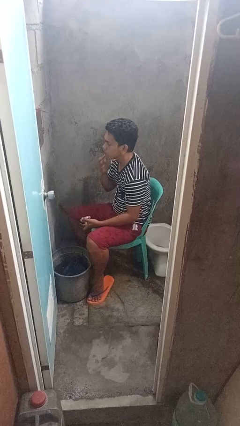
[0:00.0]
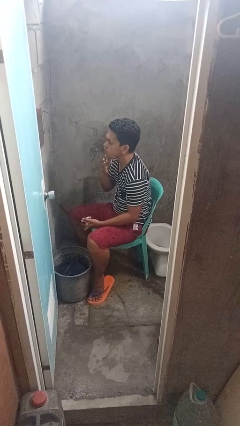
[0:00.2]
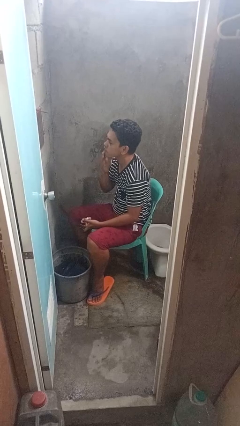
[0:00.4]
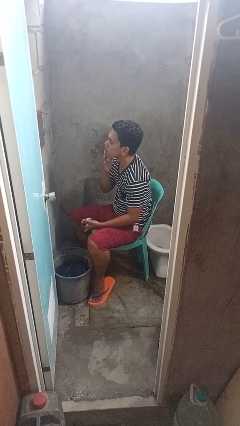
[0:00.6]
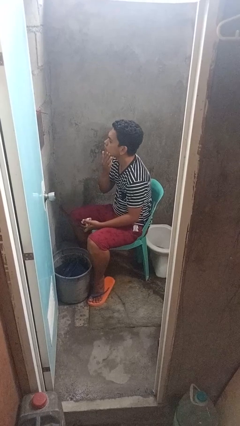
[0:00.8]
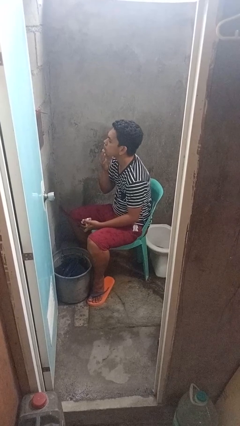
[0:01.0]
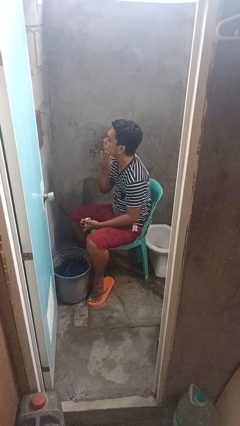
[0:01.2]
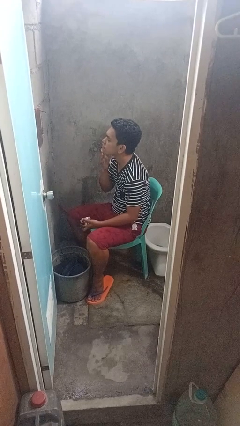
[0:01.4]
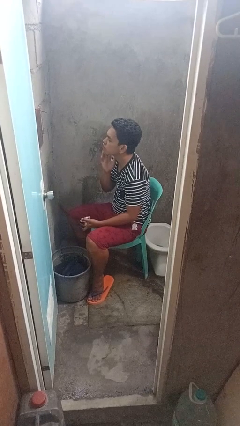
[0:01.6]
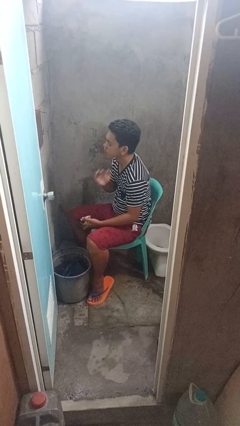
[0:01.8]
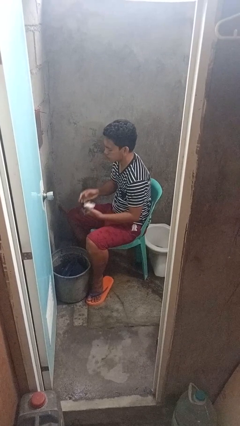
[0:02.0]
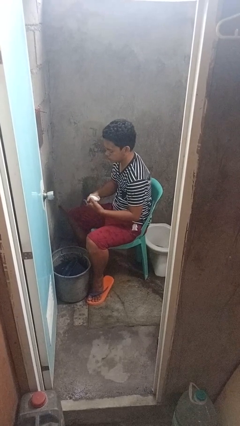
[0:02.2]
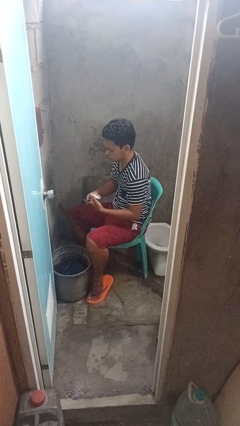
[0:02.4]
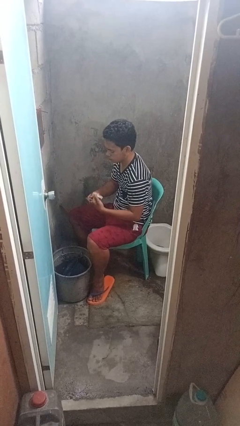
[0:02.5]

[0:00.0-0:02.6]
person applies shaving cream

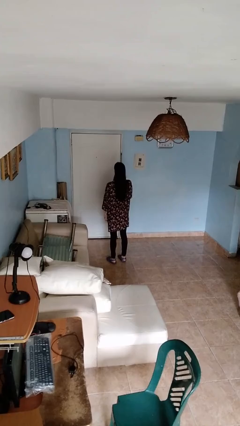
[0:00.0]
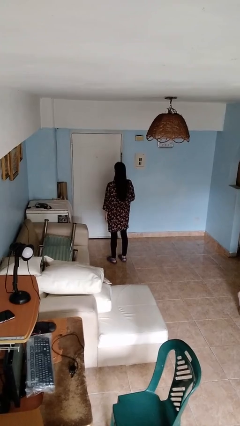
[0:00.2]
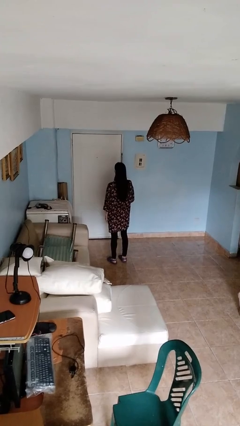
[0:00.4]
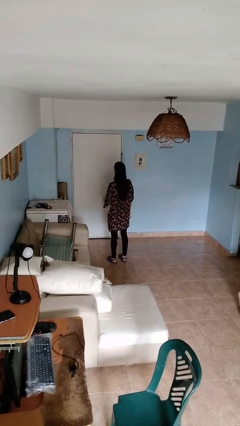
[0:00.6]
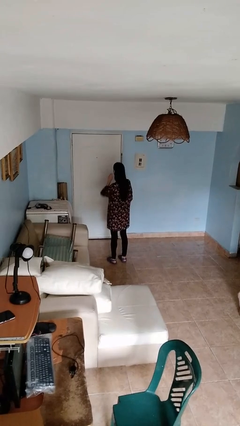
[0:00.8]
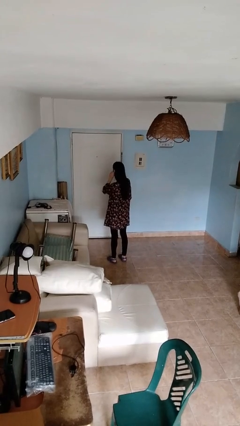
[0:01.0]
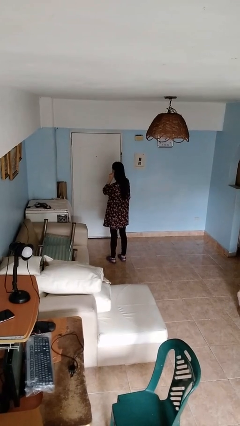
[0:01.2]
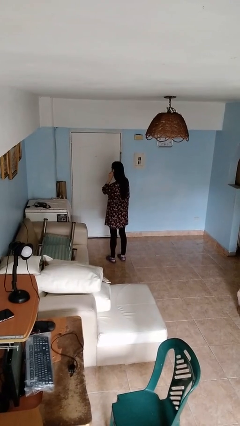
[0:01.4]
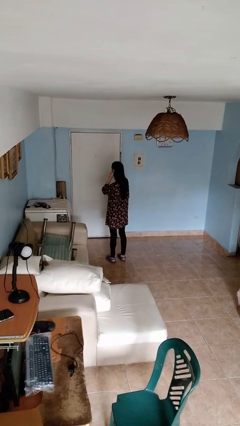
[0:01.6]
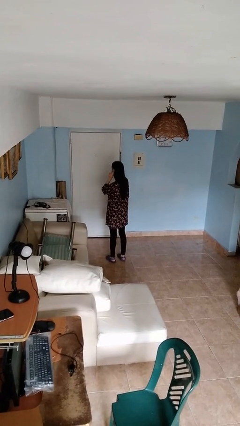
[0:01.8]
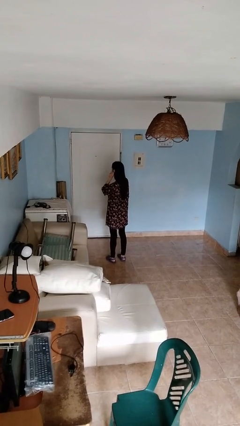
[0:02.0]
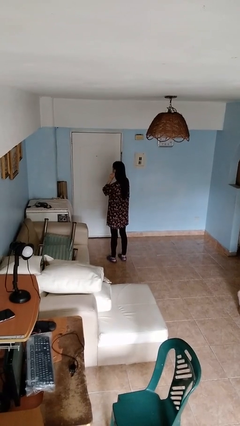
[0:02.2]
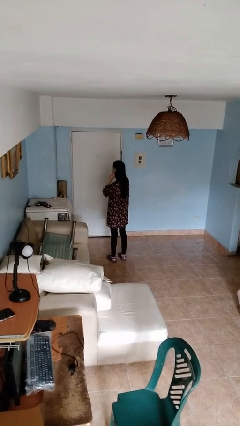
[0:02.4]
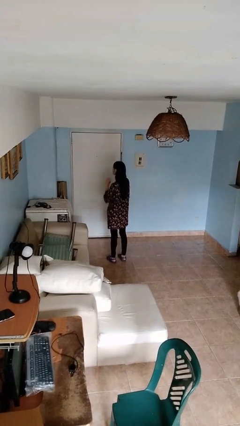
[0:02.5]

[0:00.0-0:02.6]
person touches earlobe

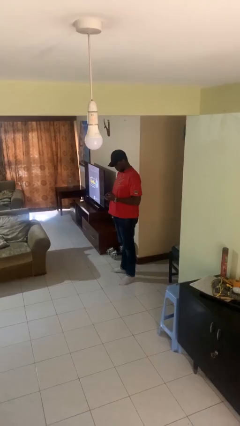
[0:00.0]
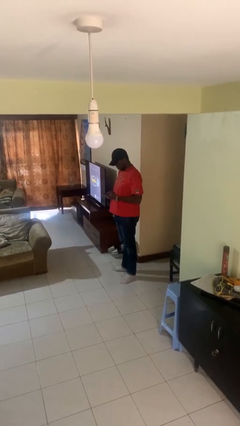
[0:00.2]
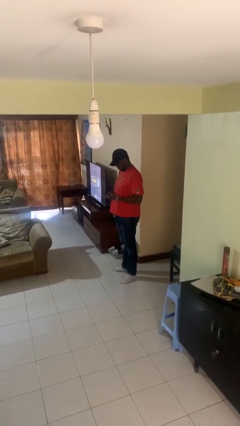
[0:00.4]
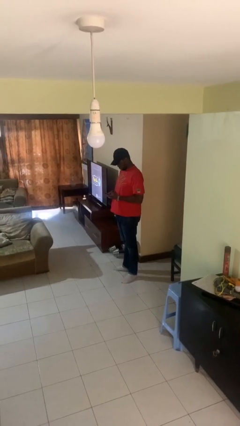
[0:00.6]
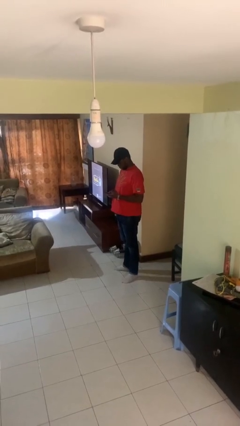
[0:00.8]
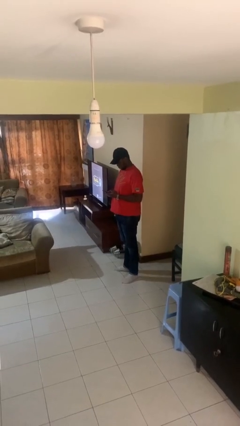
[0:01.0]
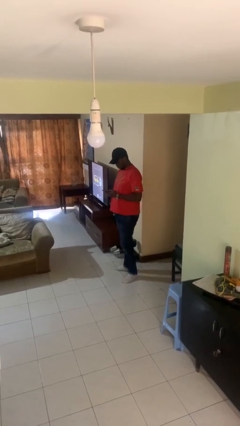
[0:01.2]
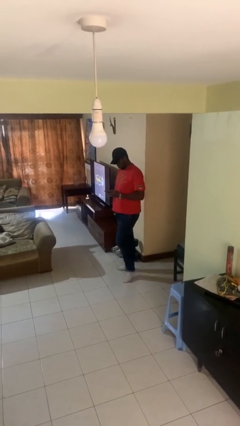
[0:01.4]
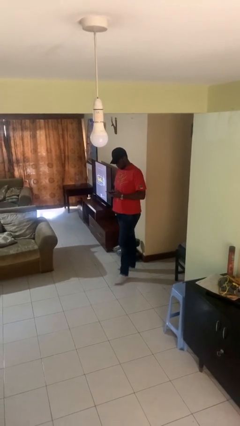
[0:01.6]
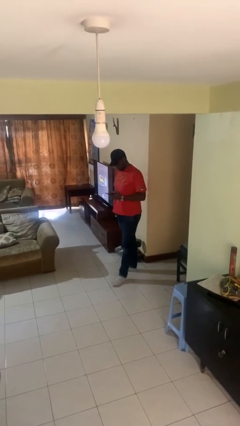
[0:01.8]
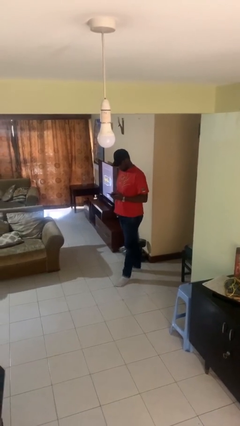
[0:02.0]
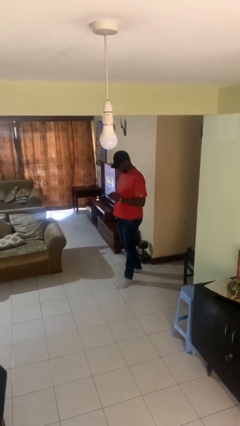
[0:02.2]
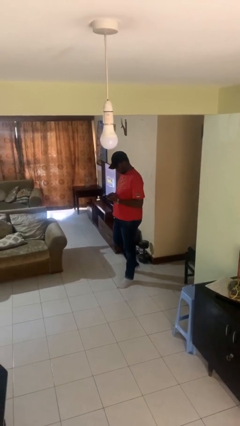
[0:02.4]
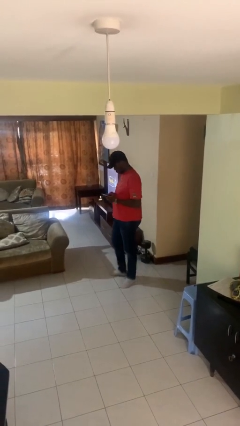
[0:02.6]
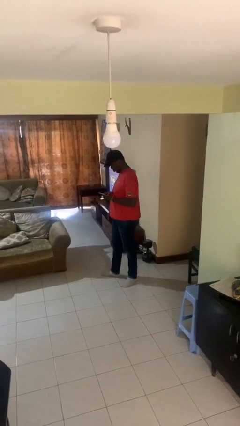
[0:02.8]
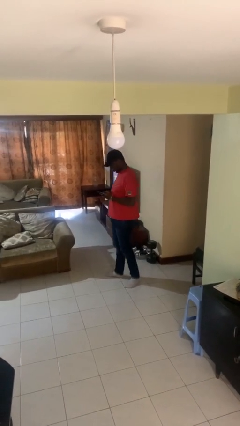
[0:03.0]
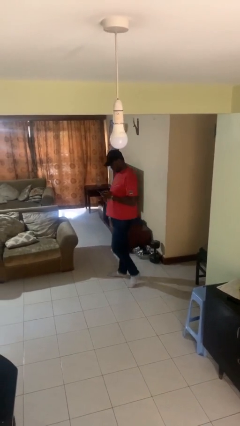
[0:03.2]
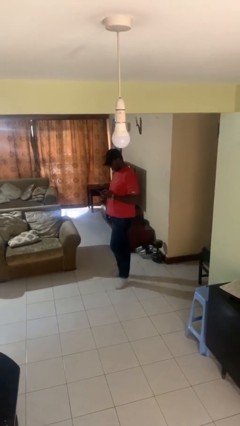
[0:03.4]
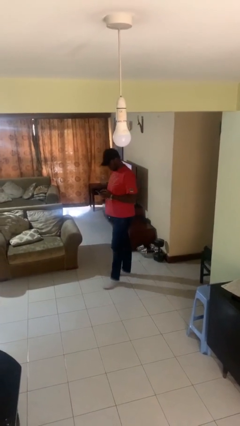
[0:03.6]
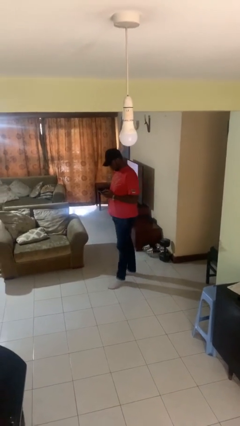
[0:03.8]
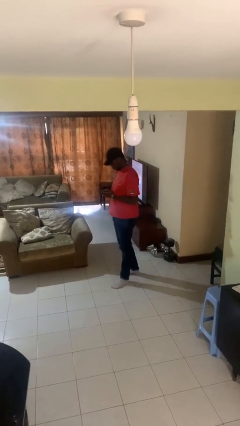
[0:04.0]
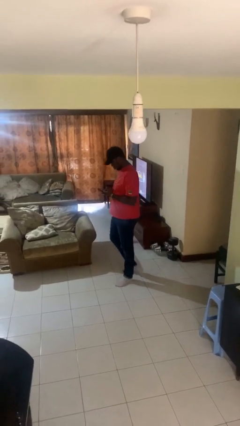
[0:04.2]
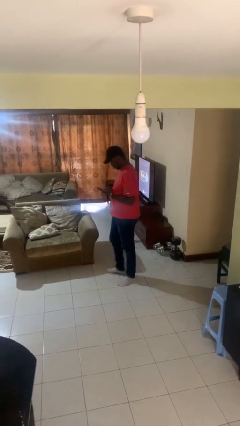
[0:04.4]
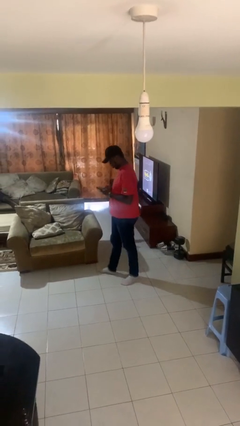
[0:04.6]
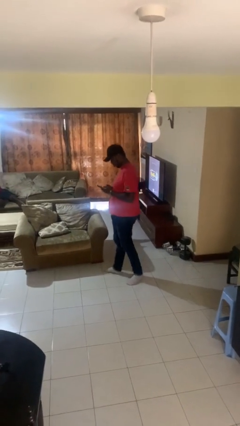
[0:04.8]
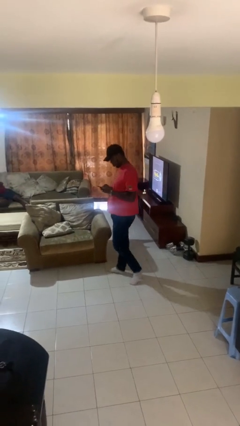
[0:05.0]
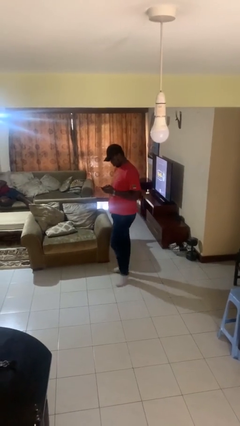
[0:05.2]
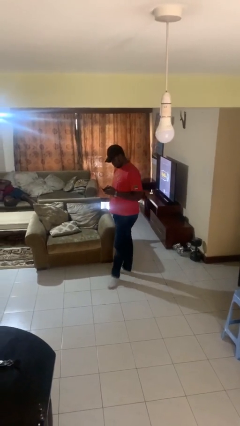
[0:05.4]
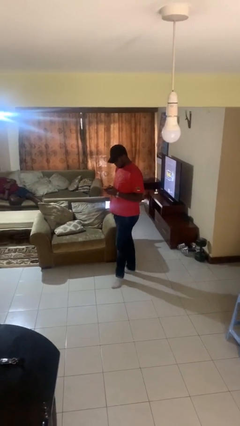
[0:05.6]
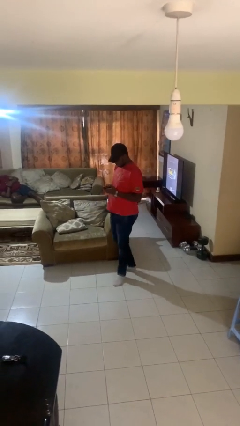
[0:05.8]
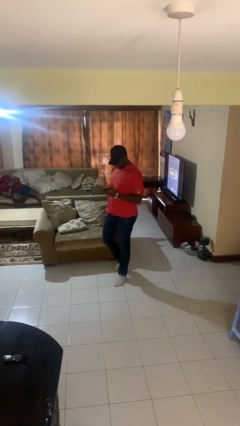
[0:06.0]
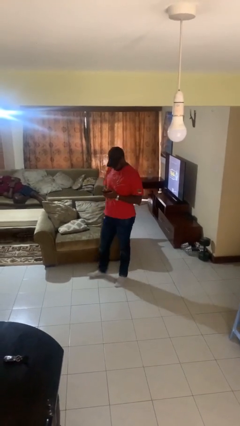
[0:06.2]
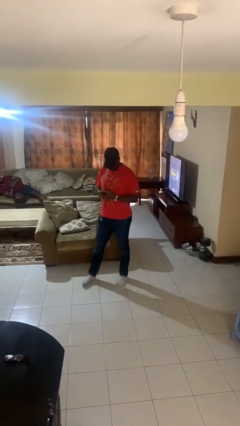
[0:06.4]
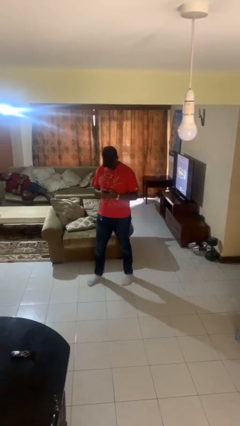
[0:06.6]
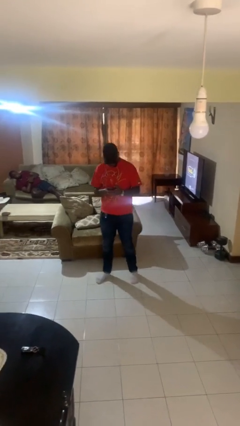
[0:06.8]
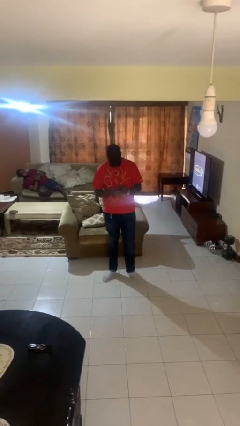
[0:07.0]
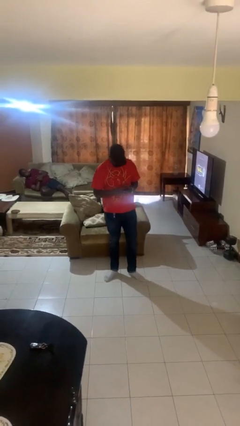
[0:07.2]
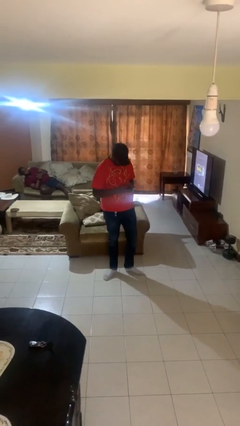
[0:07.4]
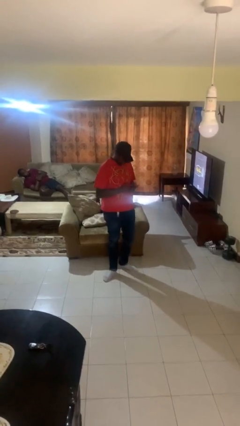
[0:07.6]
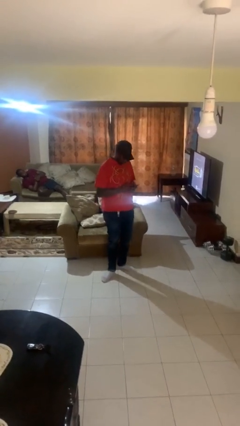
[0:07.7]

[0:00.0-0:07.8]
person texts on phone

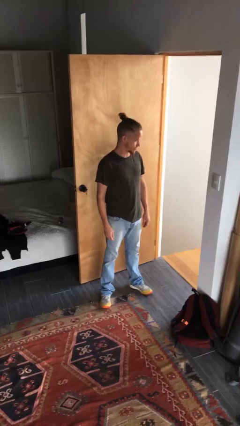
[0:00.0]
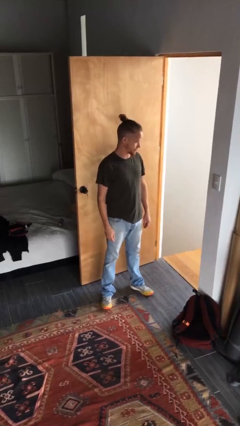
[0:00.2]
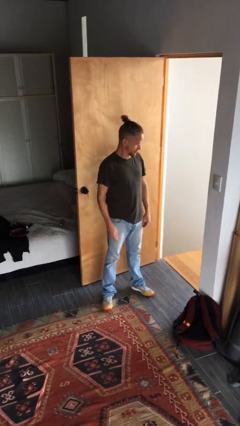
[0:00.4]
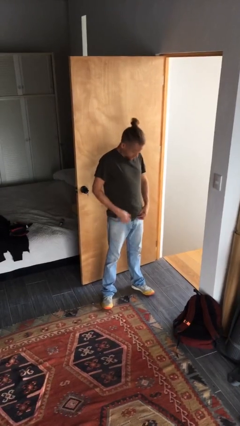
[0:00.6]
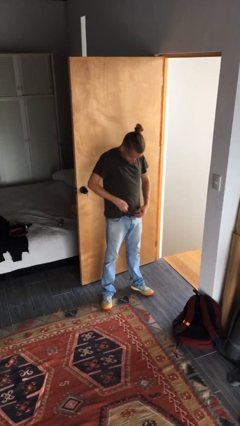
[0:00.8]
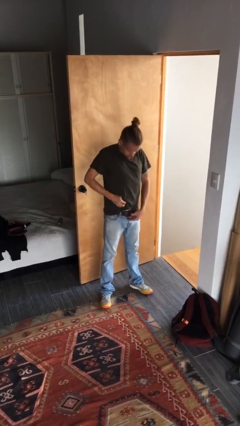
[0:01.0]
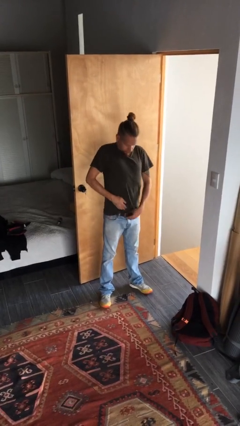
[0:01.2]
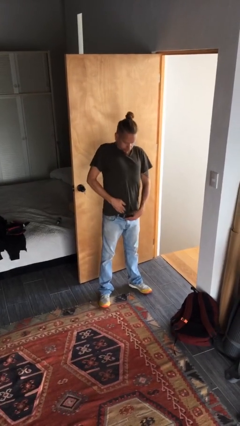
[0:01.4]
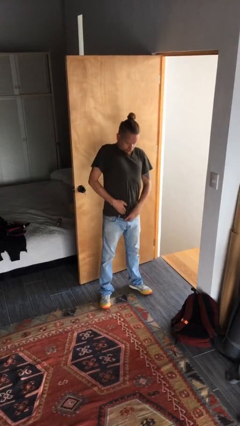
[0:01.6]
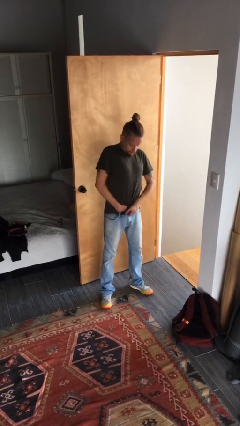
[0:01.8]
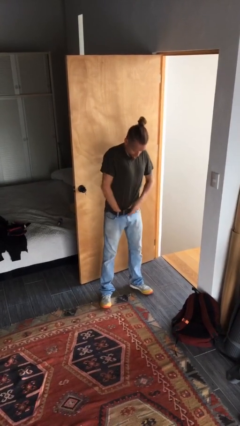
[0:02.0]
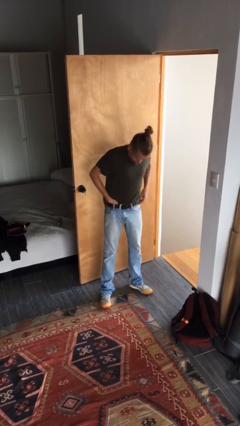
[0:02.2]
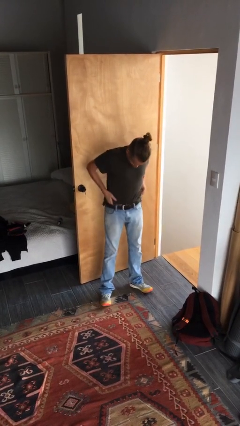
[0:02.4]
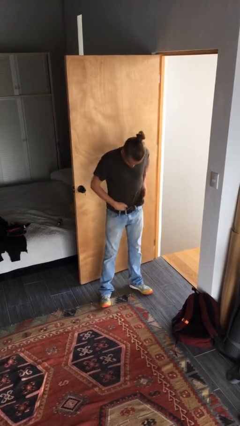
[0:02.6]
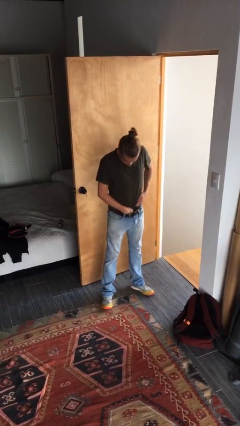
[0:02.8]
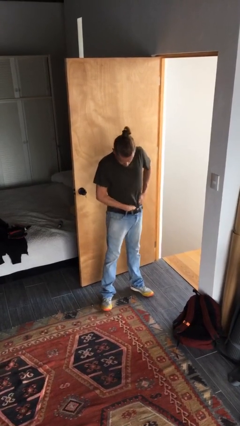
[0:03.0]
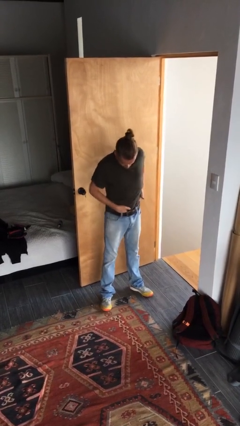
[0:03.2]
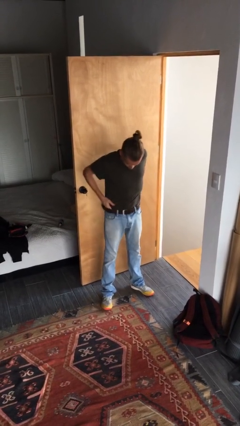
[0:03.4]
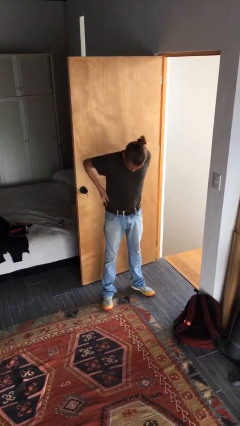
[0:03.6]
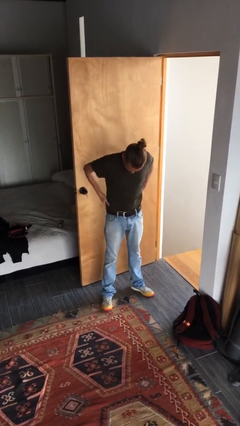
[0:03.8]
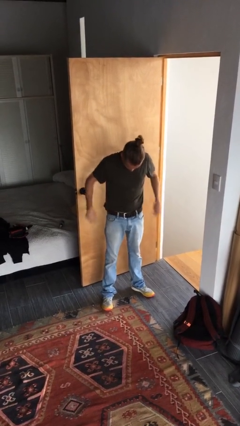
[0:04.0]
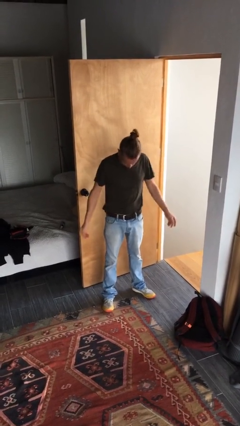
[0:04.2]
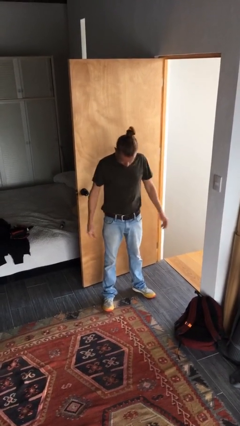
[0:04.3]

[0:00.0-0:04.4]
person tucks in shirt

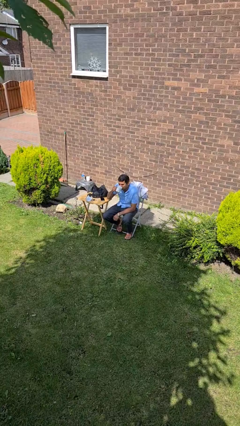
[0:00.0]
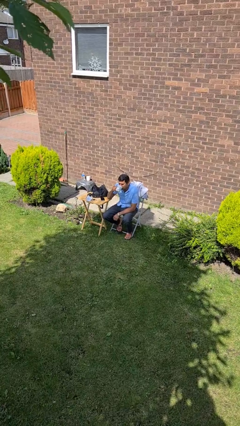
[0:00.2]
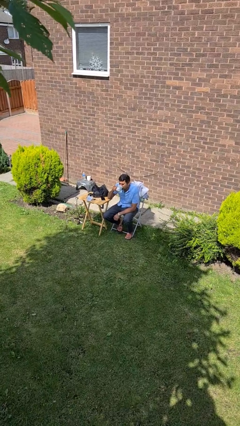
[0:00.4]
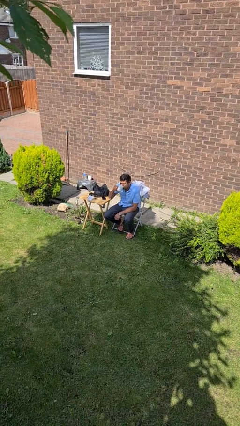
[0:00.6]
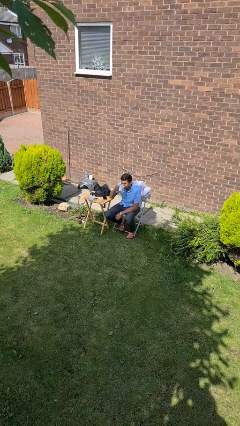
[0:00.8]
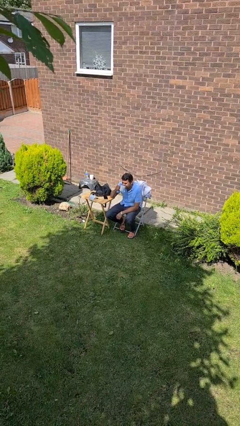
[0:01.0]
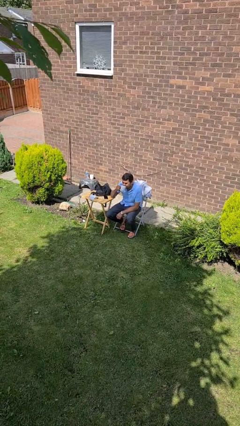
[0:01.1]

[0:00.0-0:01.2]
person puts down object on table
